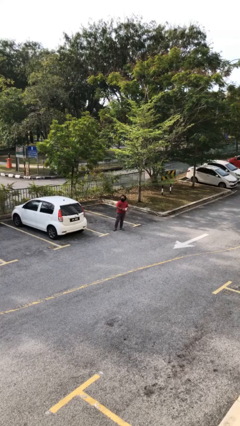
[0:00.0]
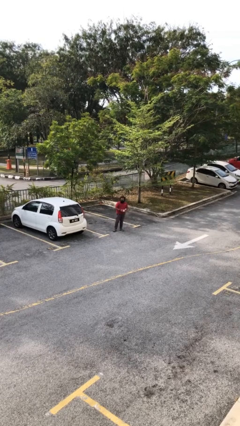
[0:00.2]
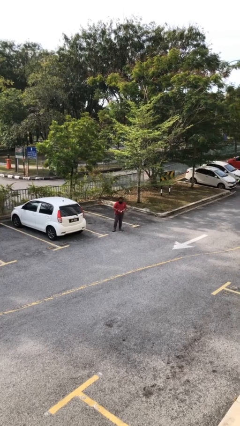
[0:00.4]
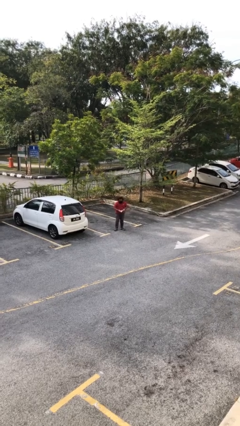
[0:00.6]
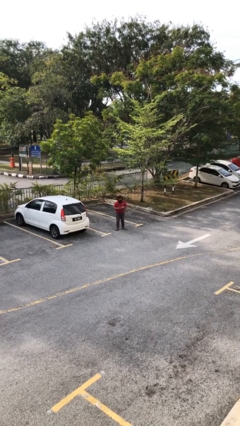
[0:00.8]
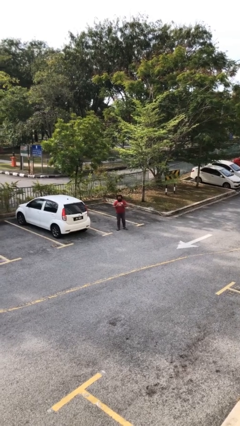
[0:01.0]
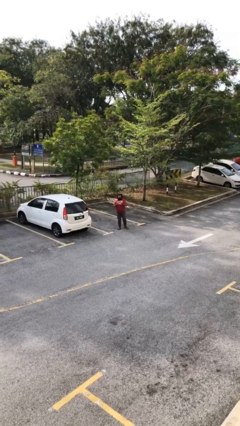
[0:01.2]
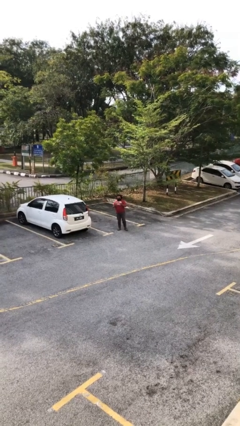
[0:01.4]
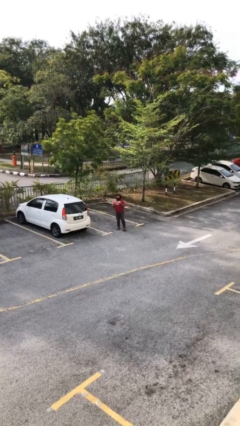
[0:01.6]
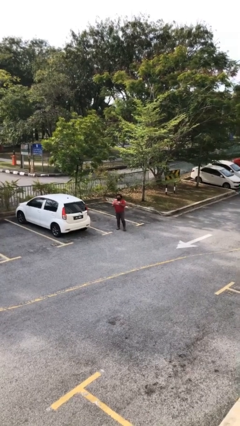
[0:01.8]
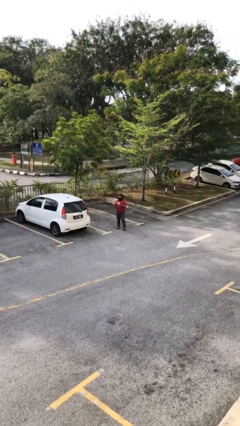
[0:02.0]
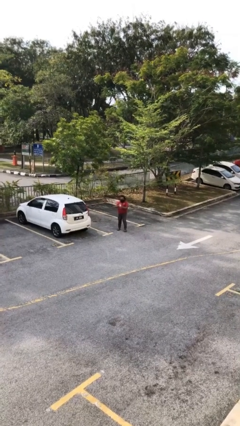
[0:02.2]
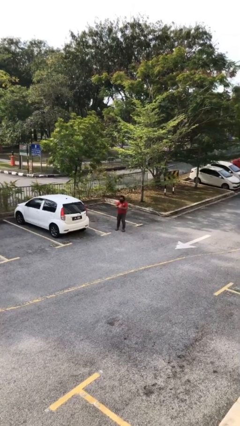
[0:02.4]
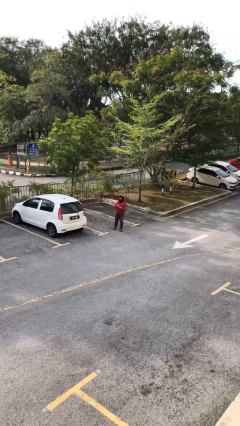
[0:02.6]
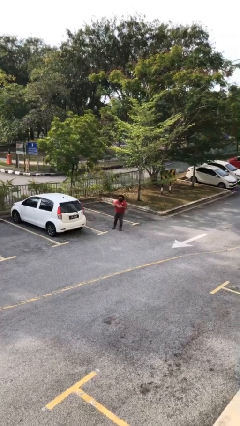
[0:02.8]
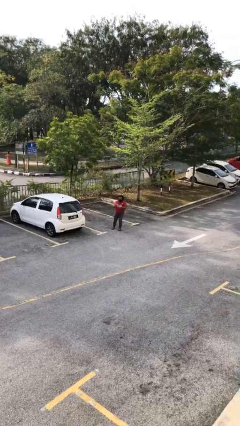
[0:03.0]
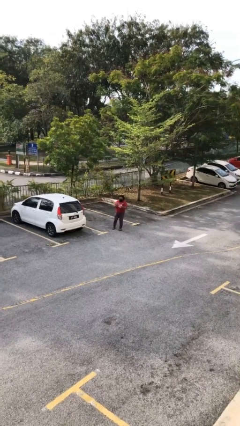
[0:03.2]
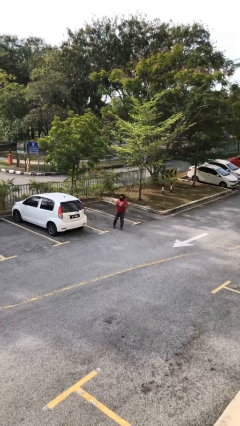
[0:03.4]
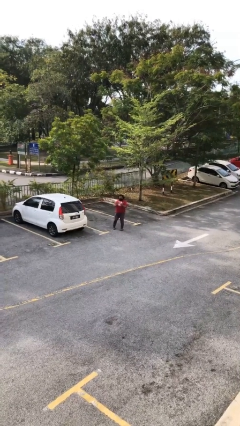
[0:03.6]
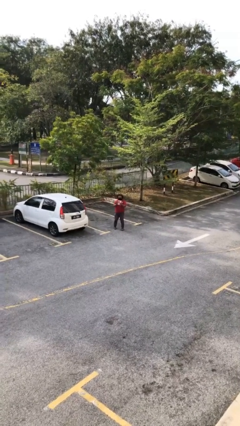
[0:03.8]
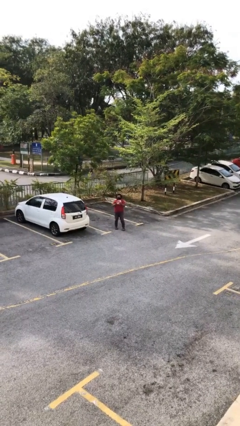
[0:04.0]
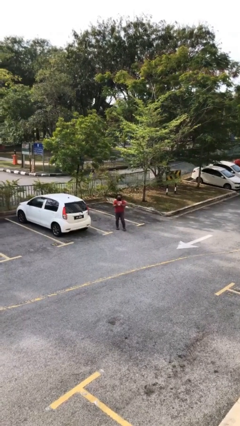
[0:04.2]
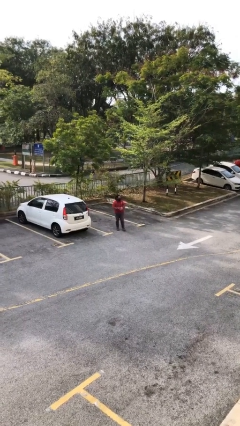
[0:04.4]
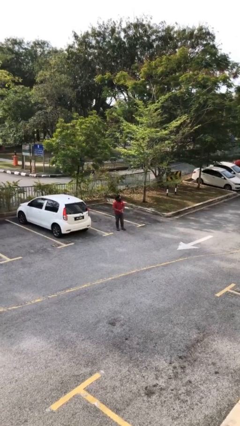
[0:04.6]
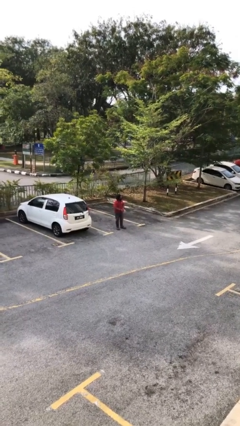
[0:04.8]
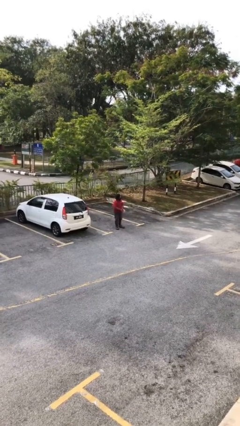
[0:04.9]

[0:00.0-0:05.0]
person reads document

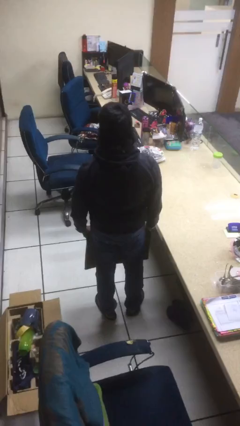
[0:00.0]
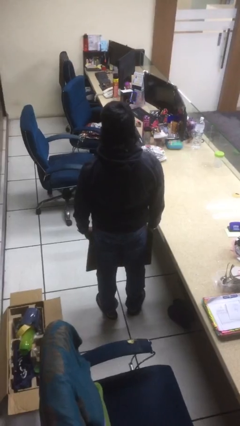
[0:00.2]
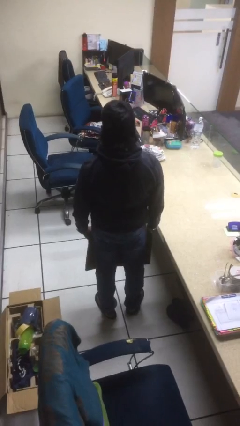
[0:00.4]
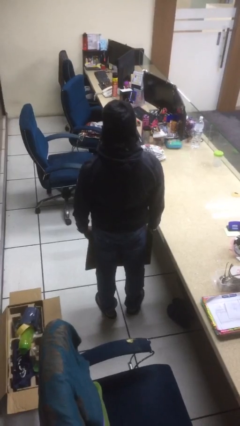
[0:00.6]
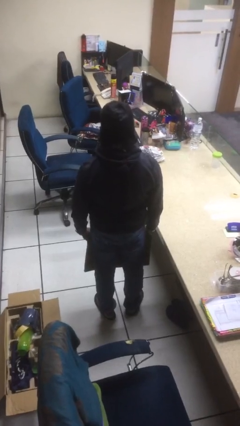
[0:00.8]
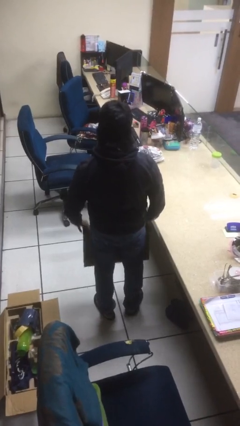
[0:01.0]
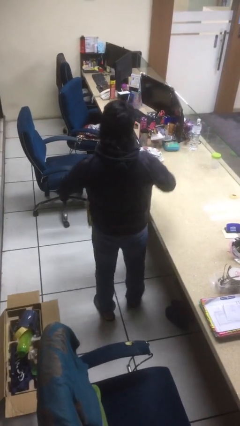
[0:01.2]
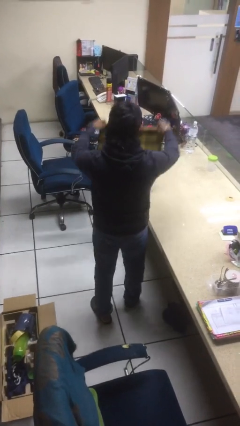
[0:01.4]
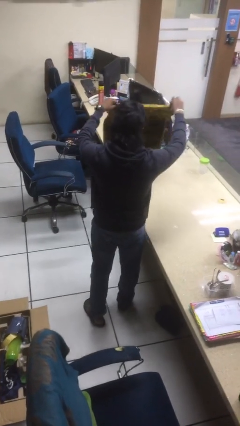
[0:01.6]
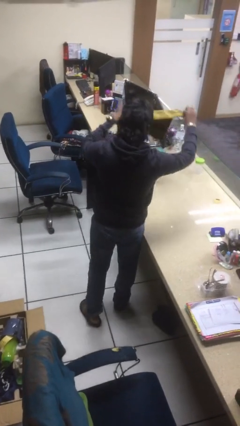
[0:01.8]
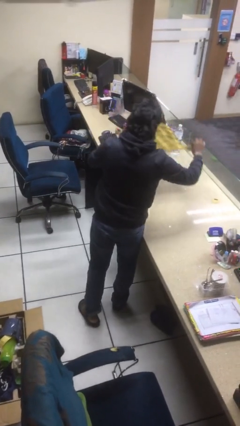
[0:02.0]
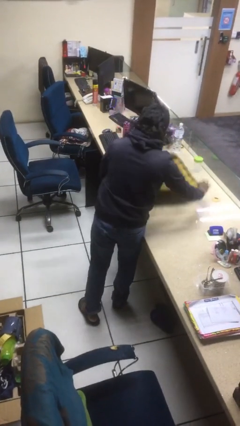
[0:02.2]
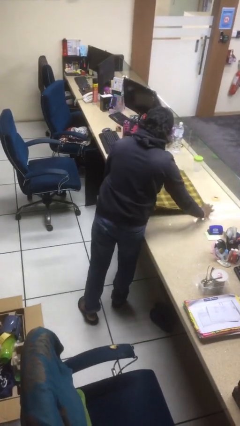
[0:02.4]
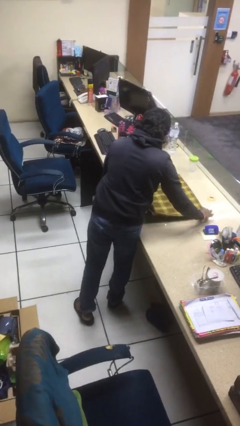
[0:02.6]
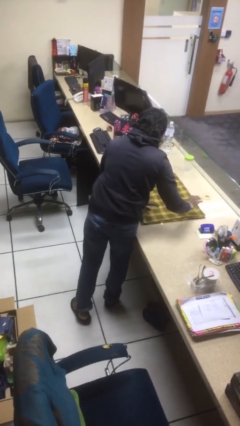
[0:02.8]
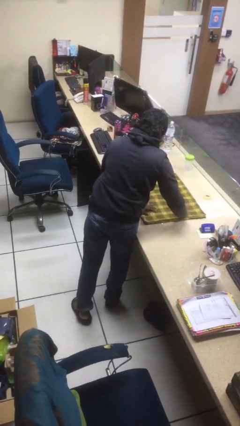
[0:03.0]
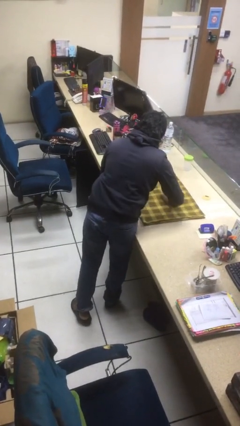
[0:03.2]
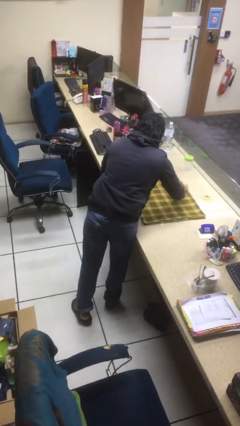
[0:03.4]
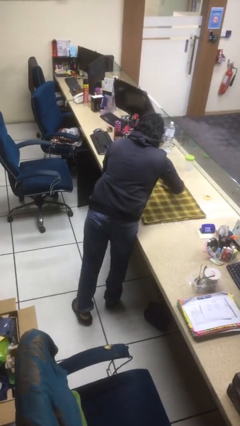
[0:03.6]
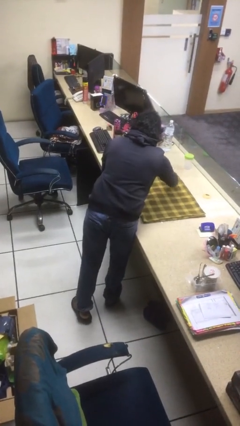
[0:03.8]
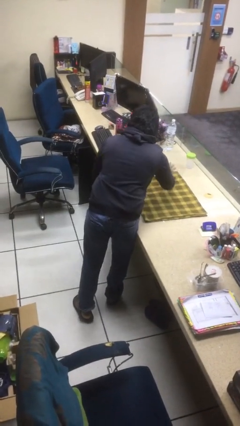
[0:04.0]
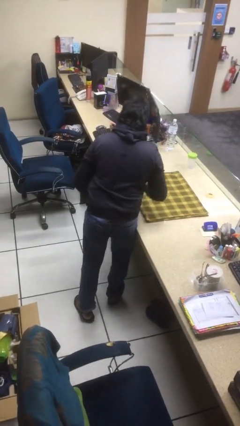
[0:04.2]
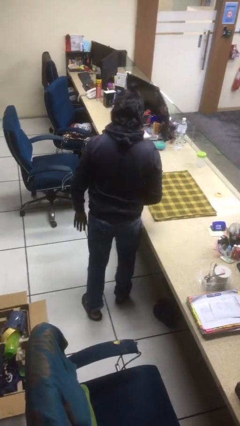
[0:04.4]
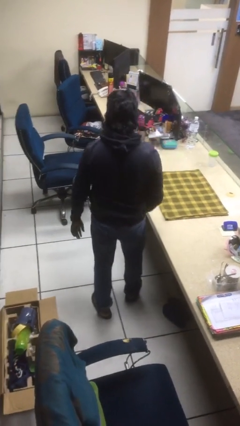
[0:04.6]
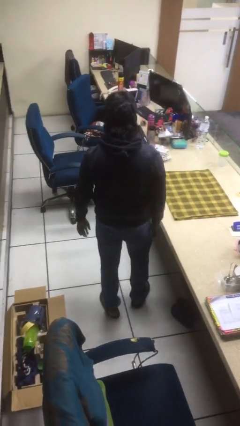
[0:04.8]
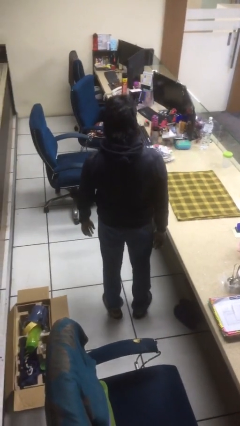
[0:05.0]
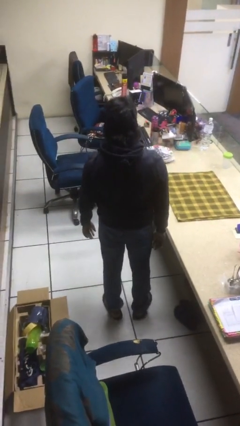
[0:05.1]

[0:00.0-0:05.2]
person spreads tablecloth

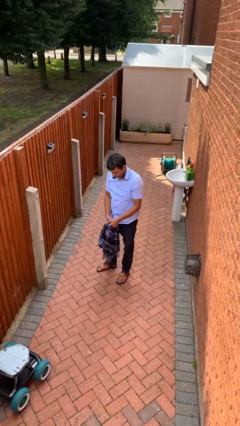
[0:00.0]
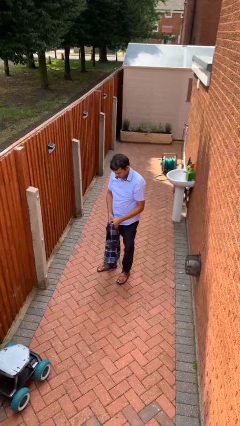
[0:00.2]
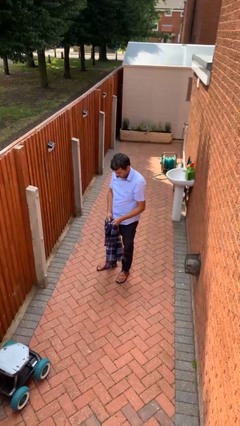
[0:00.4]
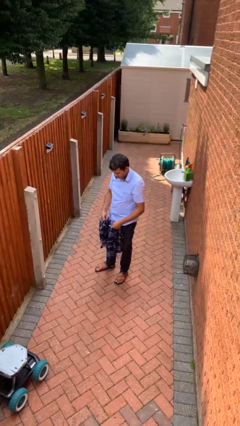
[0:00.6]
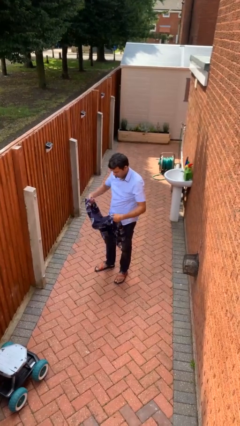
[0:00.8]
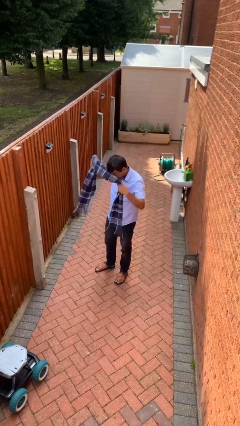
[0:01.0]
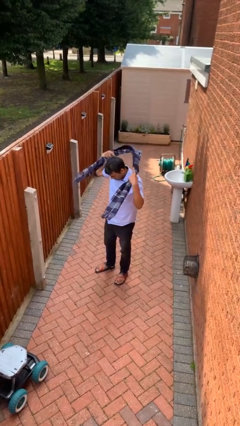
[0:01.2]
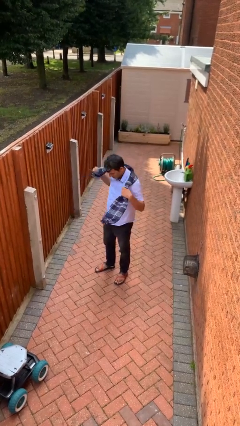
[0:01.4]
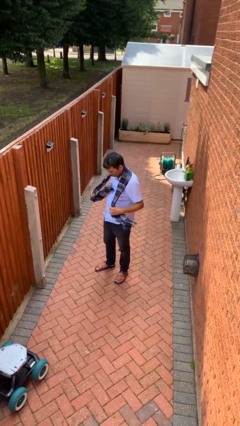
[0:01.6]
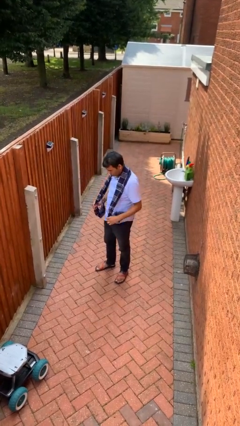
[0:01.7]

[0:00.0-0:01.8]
person puts on scarf

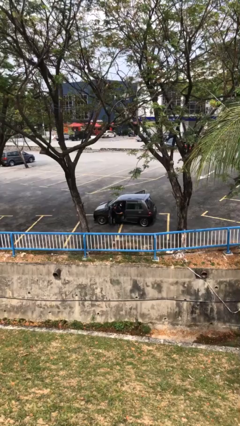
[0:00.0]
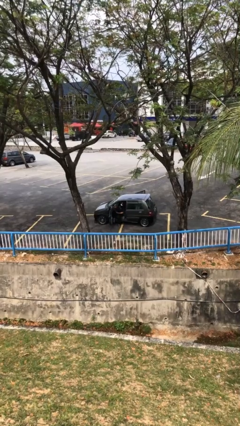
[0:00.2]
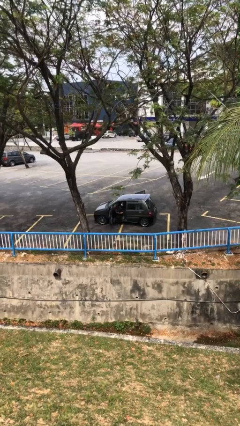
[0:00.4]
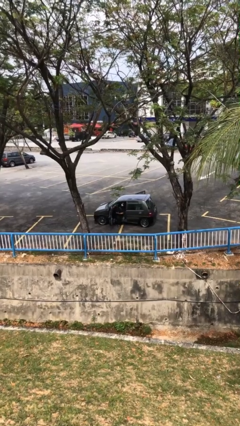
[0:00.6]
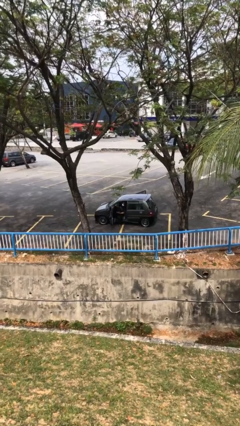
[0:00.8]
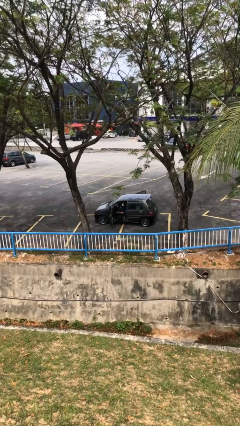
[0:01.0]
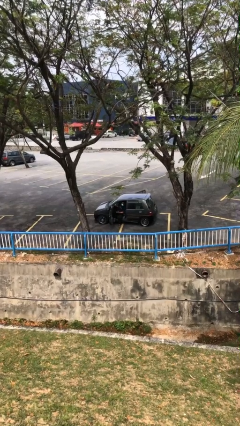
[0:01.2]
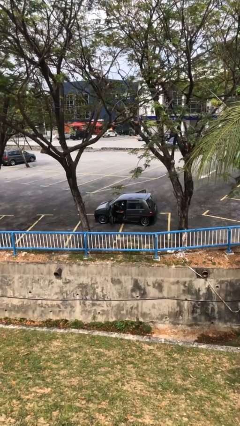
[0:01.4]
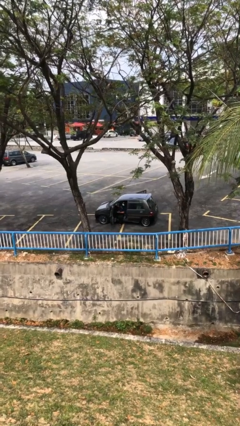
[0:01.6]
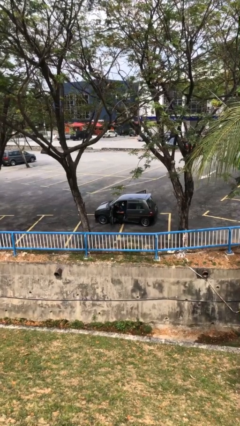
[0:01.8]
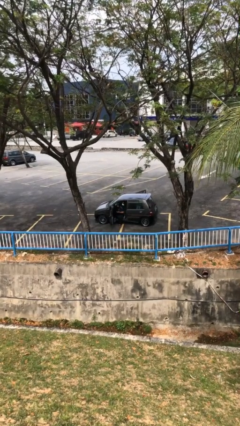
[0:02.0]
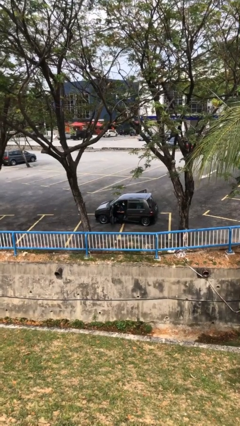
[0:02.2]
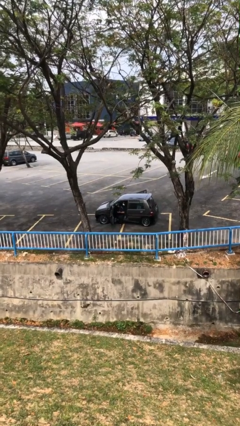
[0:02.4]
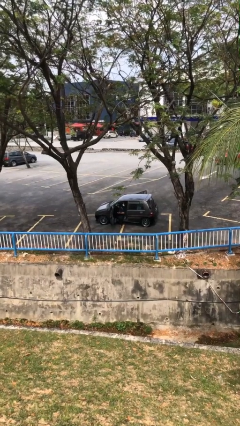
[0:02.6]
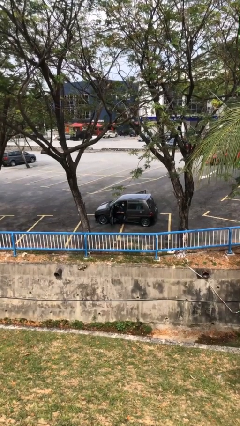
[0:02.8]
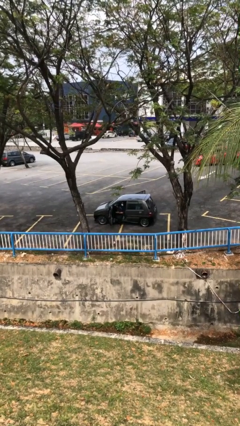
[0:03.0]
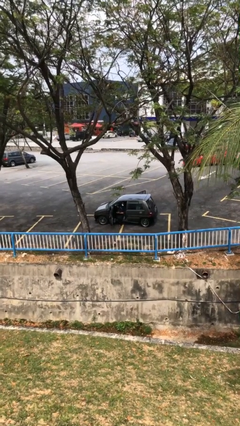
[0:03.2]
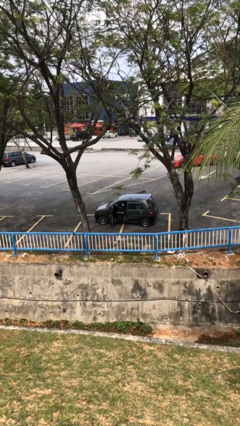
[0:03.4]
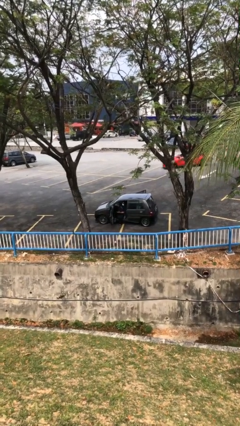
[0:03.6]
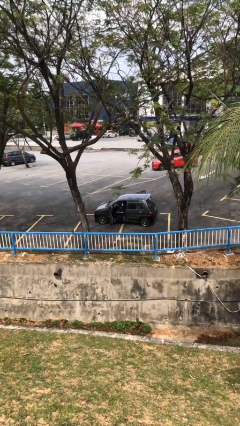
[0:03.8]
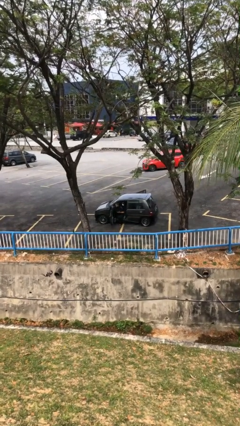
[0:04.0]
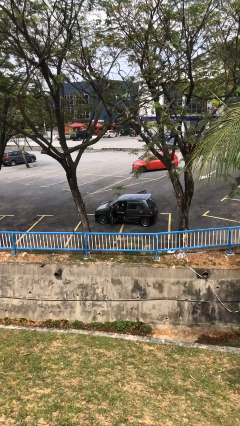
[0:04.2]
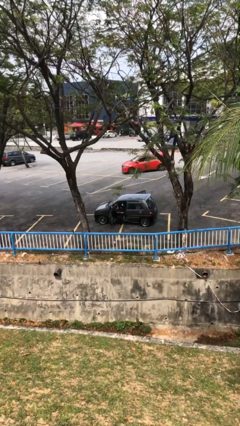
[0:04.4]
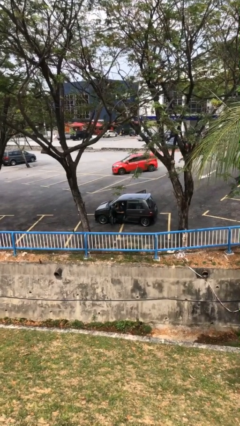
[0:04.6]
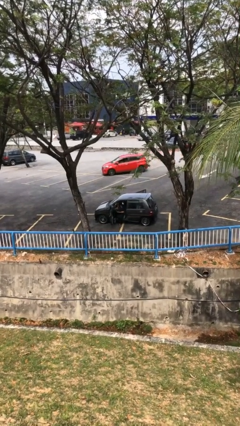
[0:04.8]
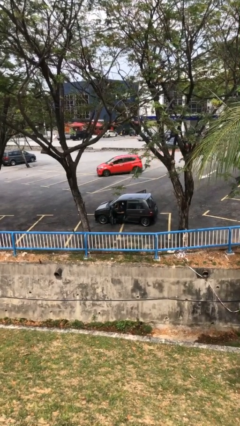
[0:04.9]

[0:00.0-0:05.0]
person interacts with laptop

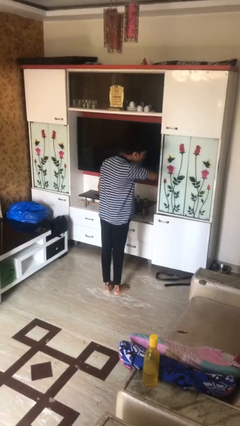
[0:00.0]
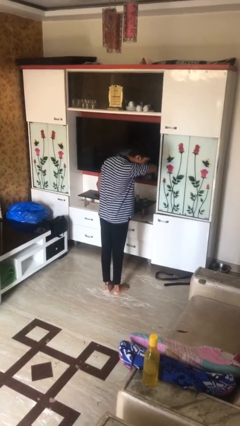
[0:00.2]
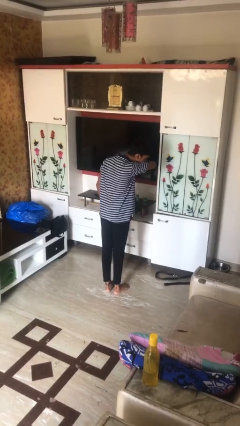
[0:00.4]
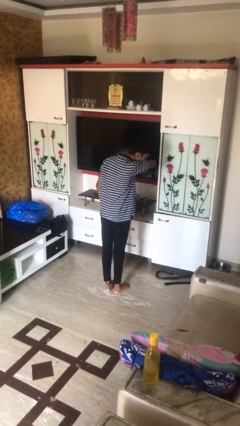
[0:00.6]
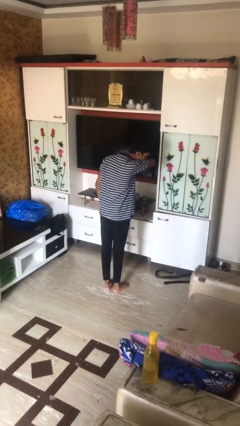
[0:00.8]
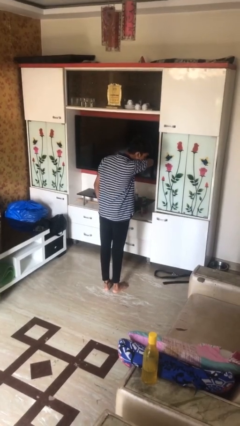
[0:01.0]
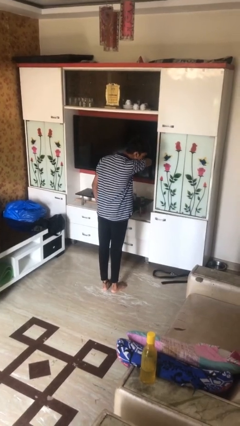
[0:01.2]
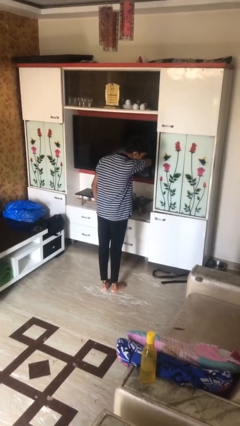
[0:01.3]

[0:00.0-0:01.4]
person sneezes into arm
